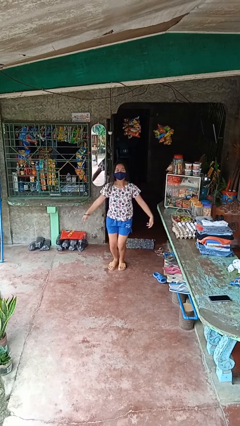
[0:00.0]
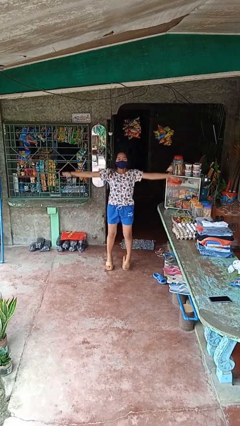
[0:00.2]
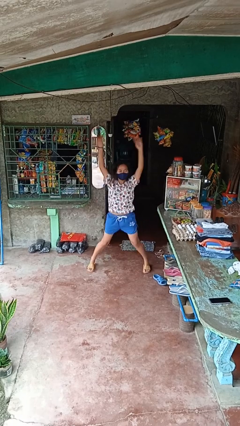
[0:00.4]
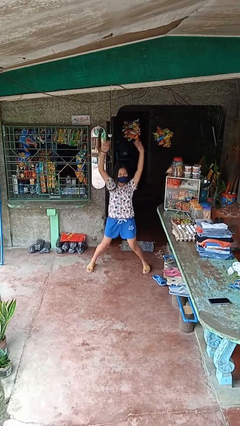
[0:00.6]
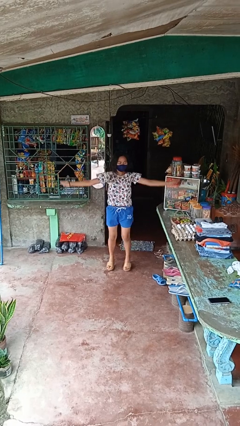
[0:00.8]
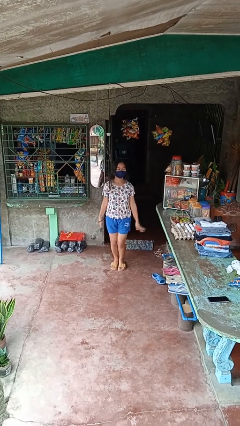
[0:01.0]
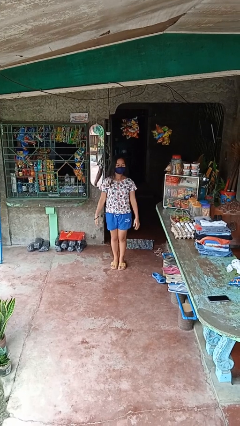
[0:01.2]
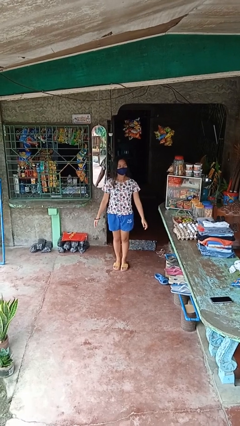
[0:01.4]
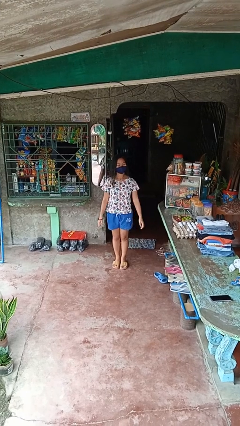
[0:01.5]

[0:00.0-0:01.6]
person exercises with jumping jacks

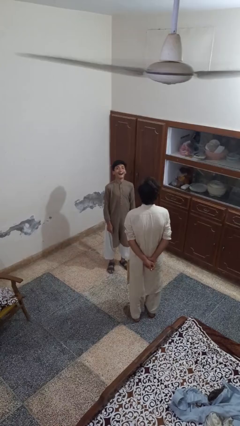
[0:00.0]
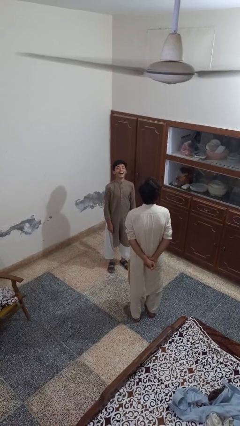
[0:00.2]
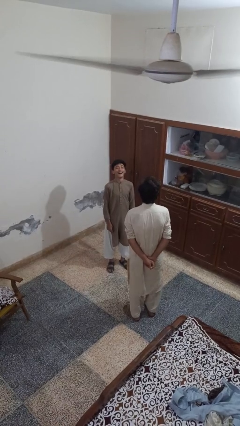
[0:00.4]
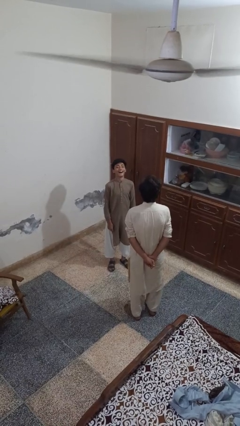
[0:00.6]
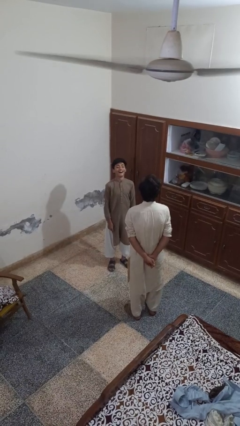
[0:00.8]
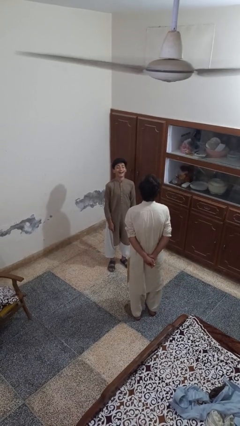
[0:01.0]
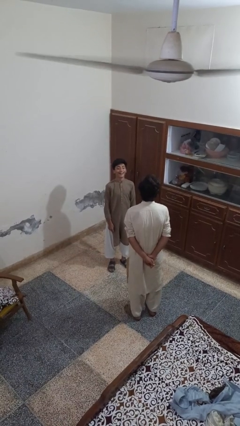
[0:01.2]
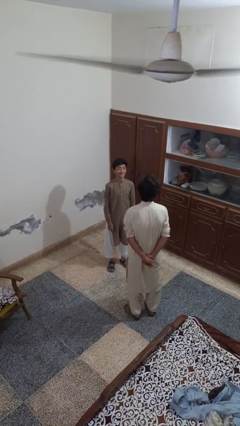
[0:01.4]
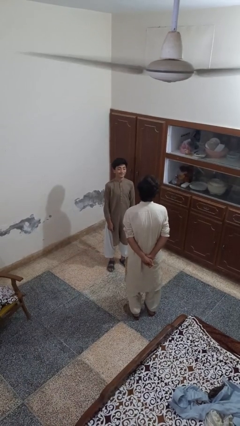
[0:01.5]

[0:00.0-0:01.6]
person laughs with person

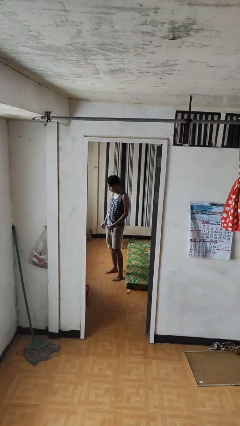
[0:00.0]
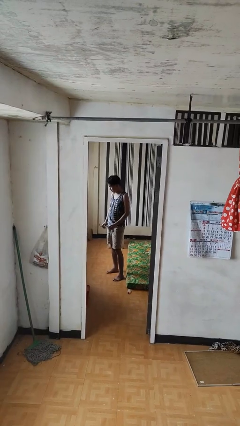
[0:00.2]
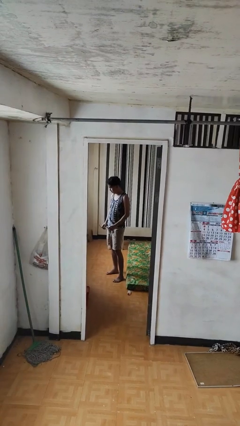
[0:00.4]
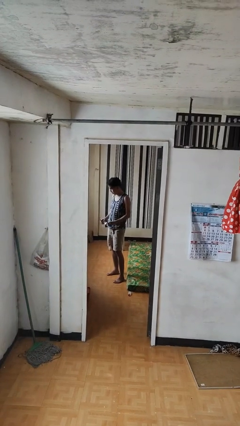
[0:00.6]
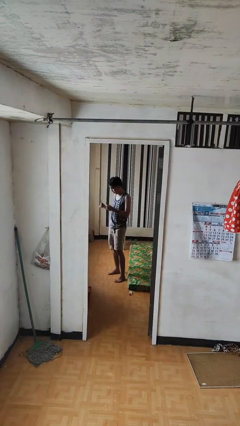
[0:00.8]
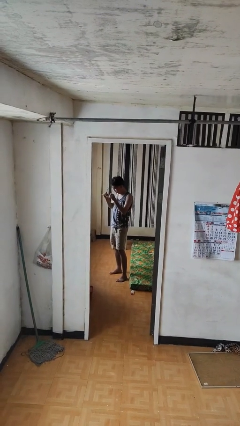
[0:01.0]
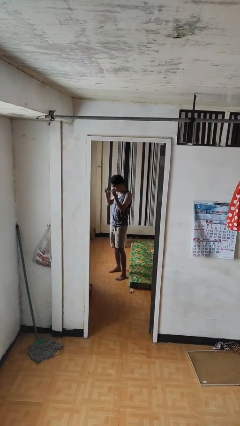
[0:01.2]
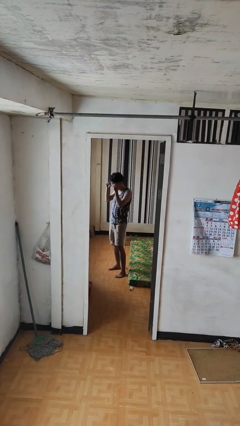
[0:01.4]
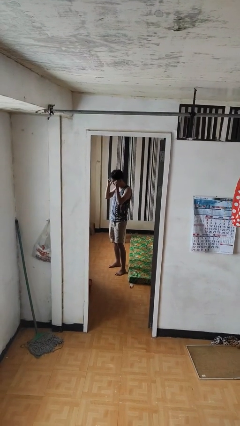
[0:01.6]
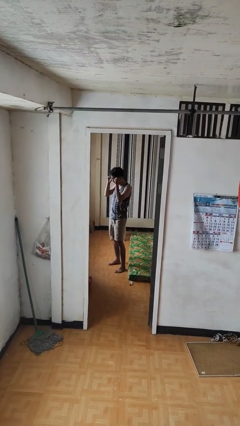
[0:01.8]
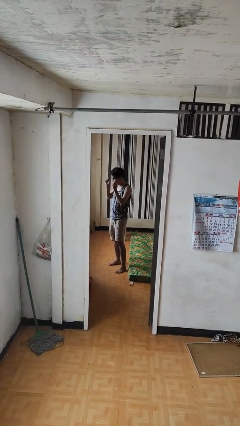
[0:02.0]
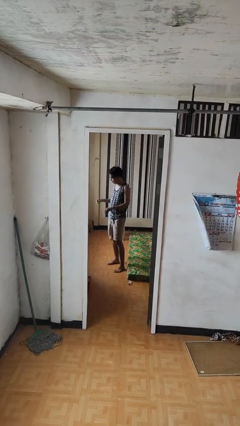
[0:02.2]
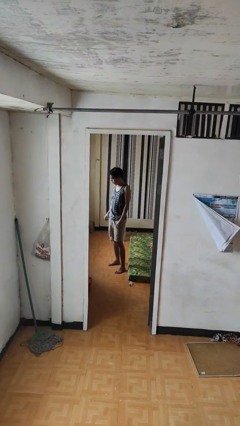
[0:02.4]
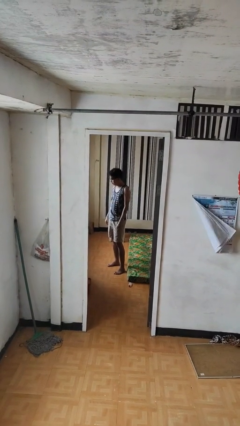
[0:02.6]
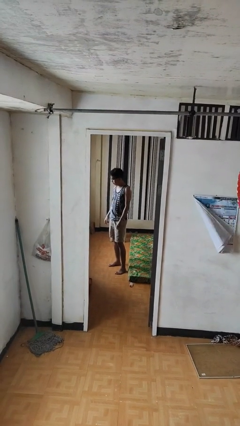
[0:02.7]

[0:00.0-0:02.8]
person puts on glasses

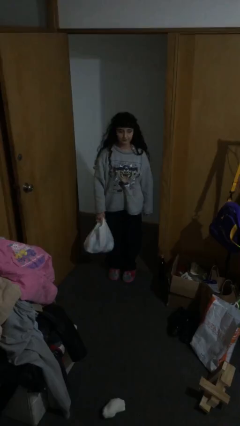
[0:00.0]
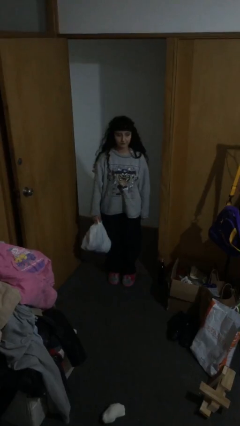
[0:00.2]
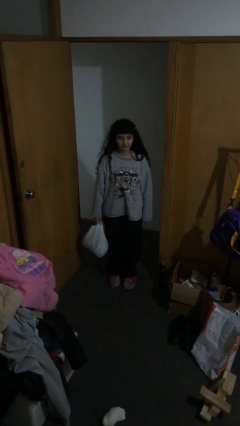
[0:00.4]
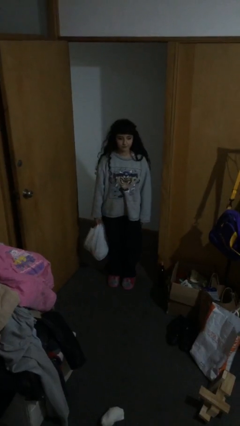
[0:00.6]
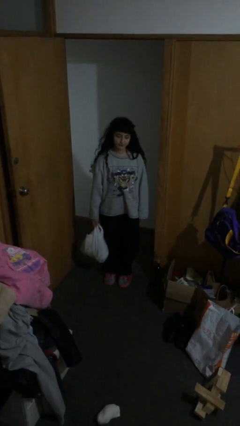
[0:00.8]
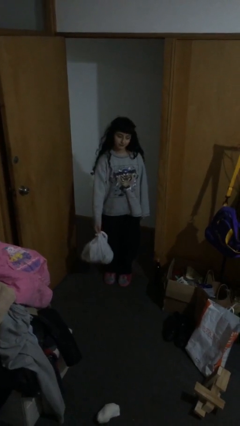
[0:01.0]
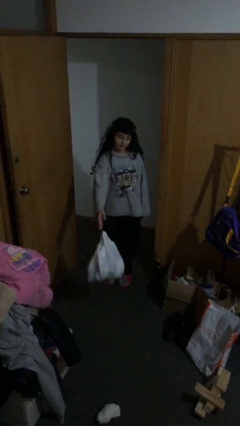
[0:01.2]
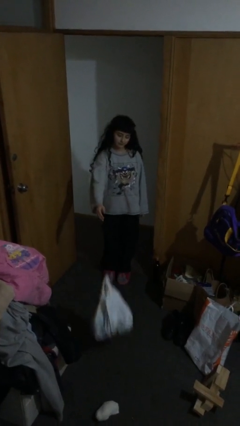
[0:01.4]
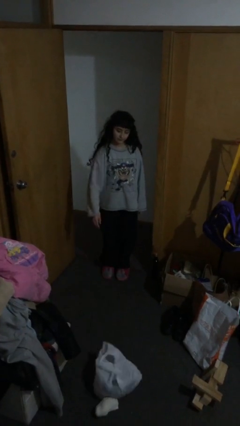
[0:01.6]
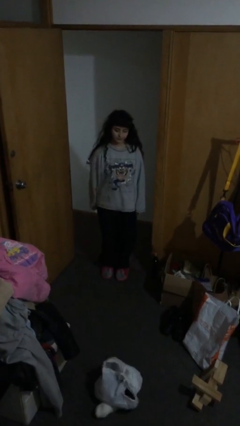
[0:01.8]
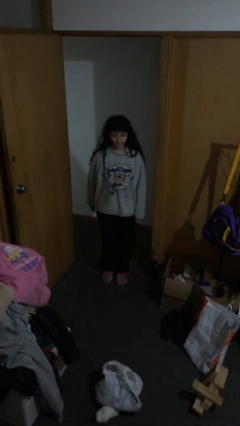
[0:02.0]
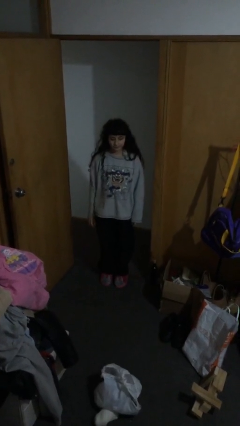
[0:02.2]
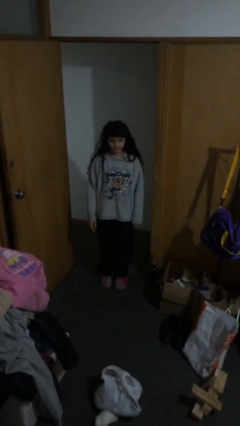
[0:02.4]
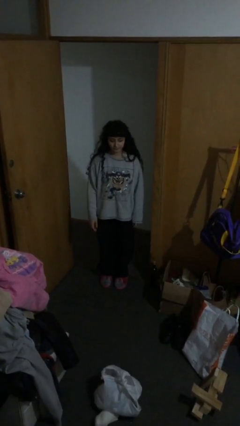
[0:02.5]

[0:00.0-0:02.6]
person throws object to ground

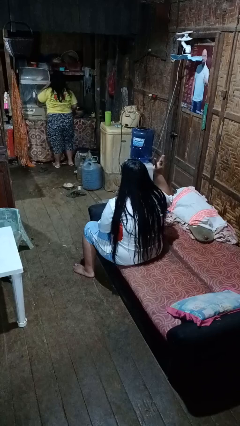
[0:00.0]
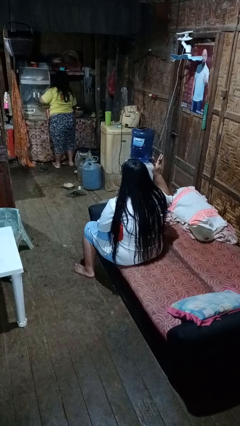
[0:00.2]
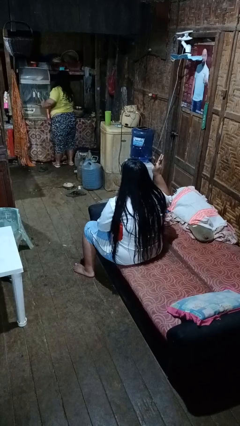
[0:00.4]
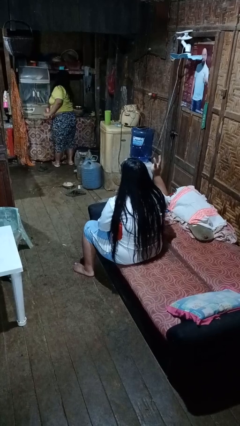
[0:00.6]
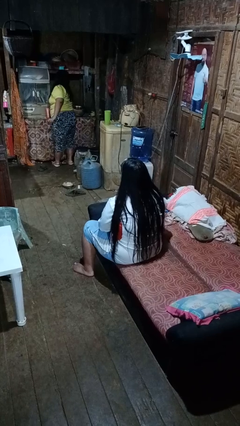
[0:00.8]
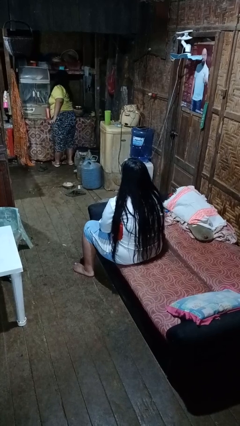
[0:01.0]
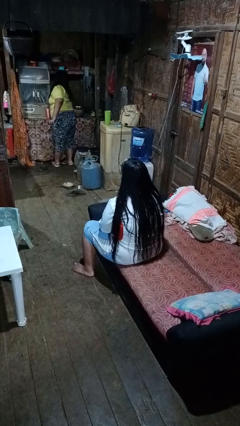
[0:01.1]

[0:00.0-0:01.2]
person gestures number three

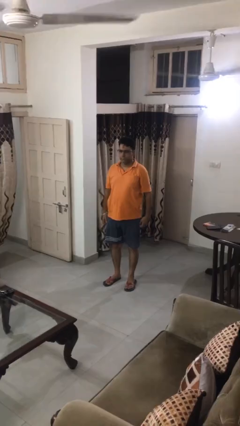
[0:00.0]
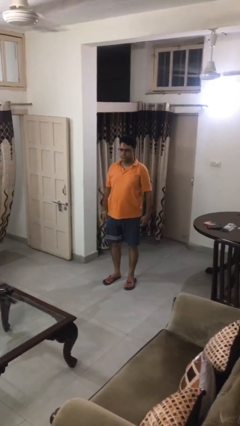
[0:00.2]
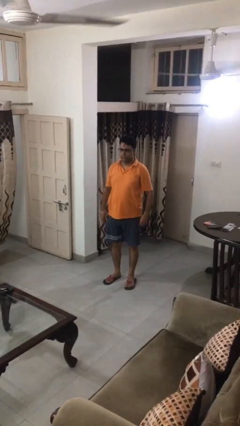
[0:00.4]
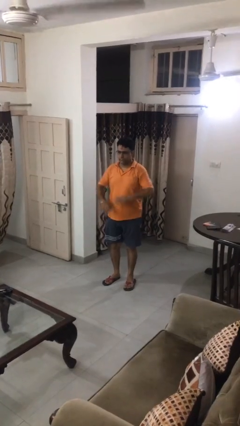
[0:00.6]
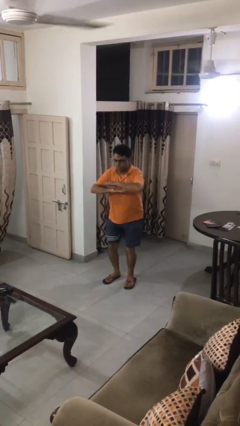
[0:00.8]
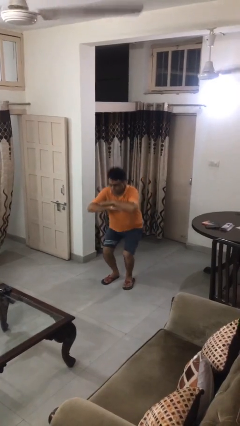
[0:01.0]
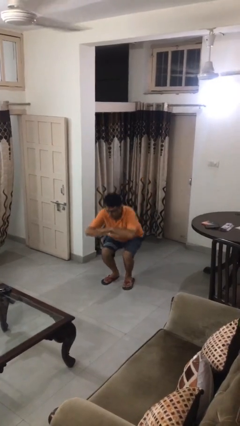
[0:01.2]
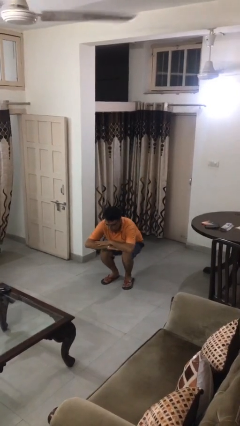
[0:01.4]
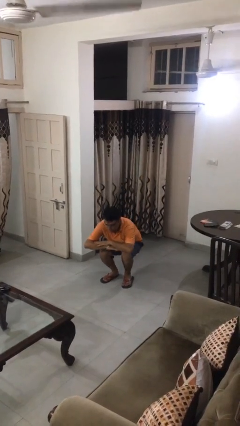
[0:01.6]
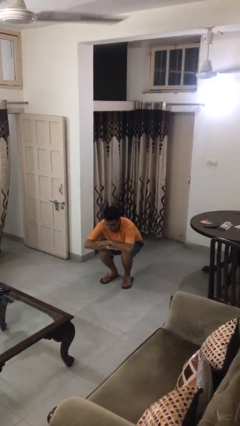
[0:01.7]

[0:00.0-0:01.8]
person squats

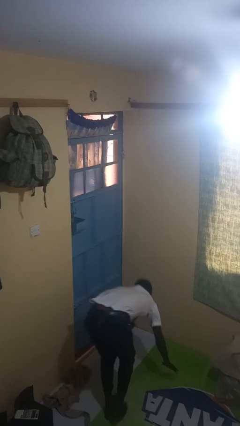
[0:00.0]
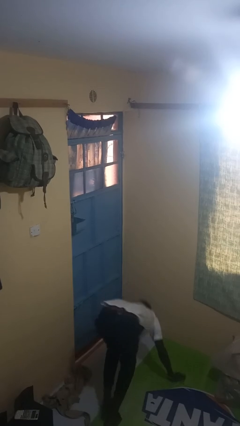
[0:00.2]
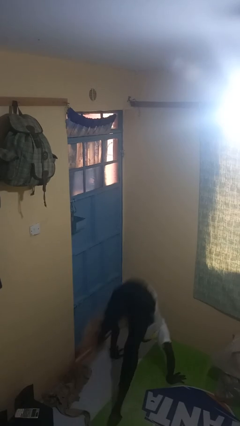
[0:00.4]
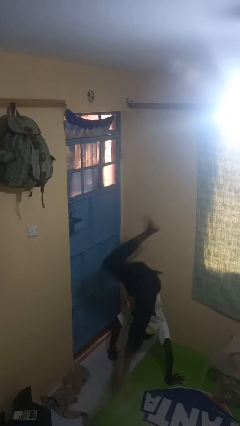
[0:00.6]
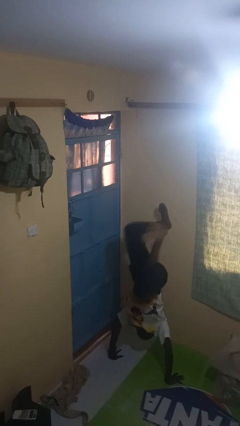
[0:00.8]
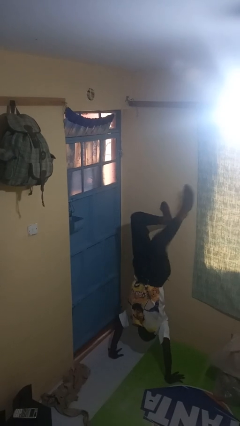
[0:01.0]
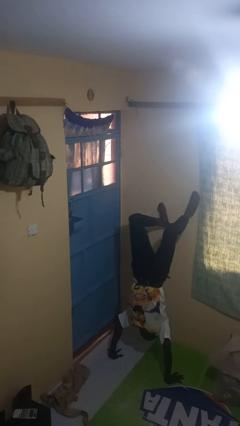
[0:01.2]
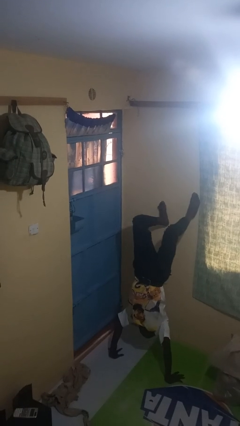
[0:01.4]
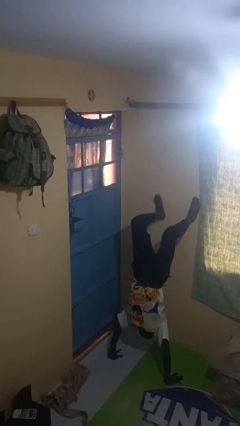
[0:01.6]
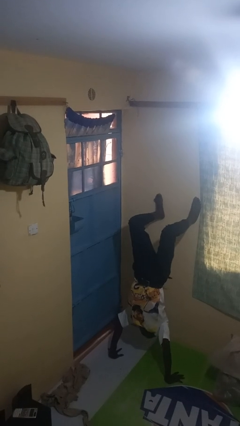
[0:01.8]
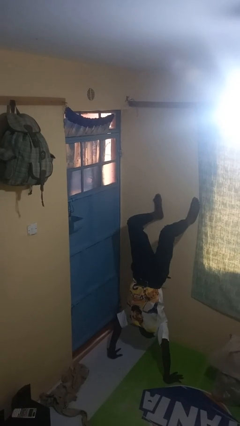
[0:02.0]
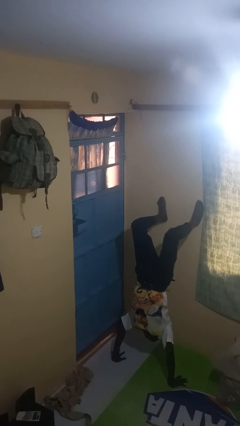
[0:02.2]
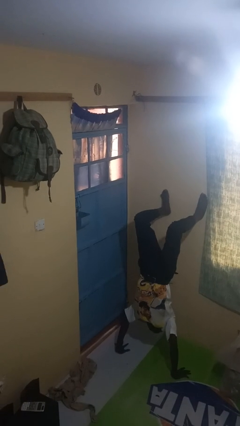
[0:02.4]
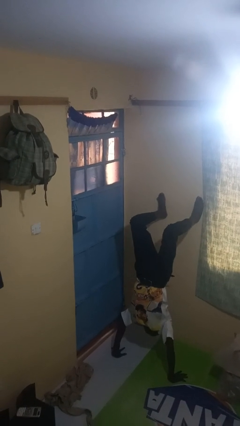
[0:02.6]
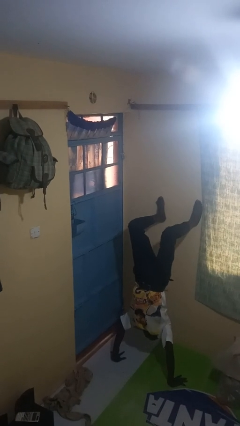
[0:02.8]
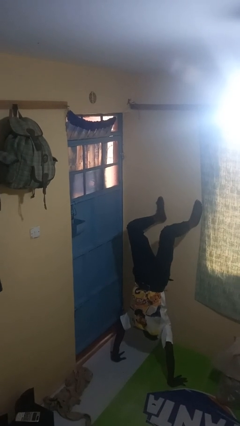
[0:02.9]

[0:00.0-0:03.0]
person handstand

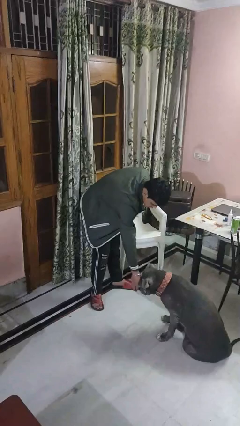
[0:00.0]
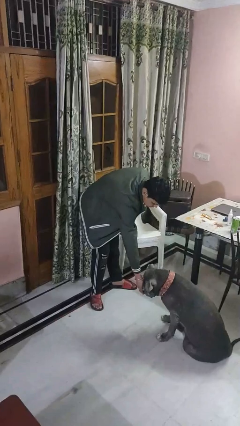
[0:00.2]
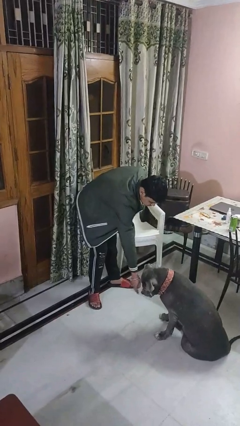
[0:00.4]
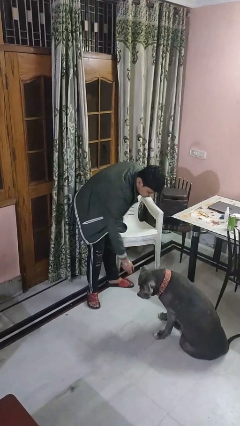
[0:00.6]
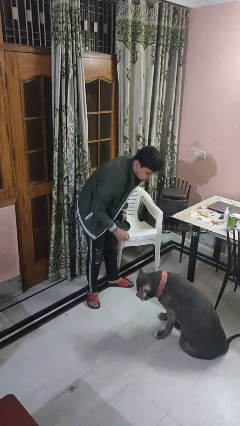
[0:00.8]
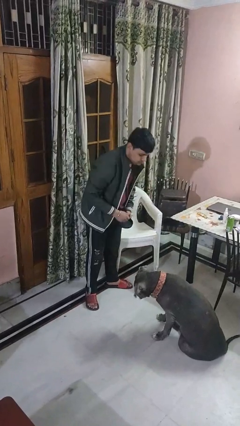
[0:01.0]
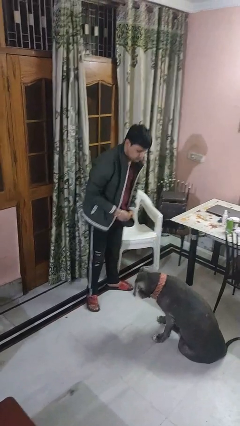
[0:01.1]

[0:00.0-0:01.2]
person feeds dog

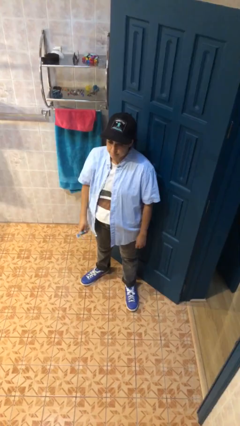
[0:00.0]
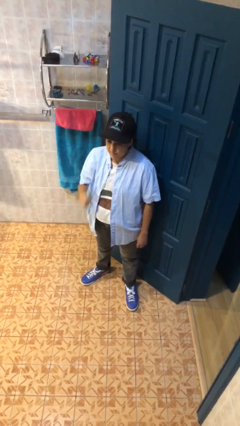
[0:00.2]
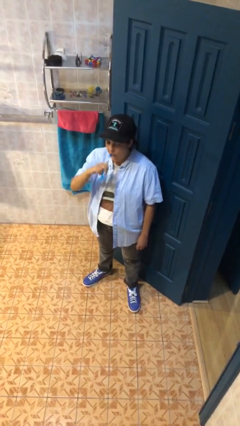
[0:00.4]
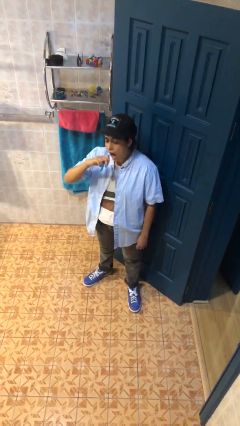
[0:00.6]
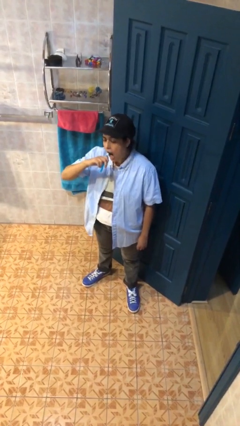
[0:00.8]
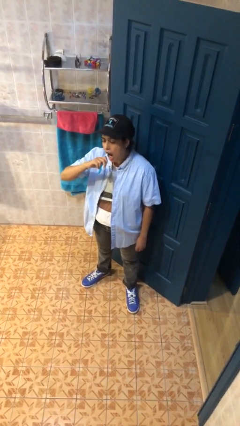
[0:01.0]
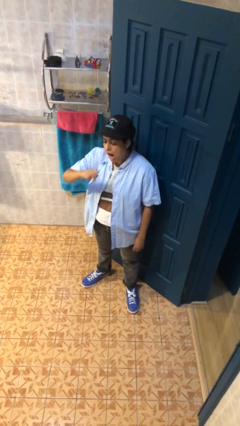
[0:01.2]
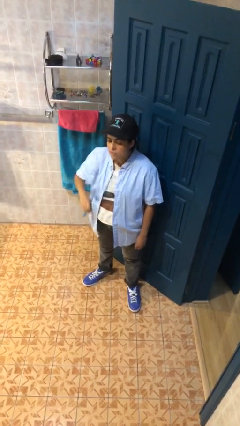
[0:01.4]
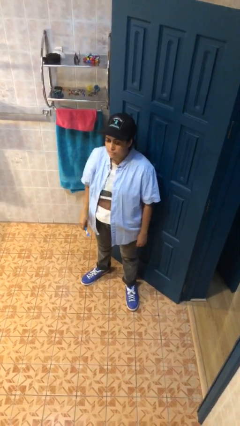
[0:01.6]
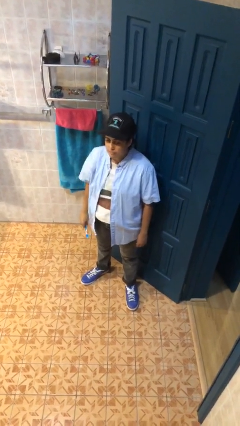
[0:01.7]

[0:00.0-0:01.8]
person brushes teeth
